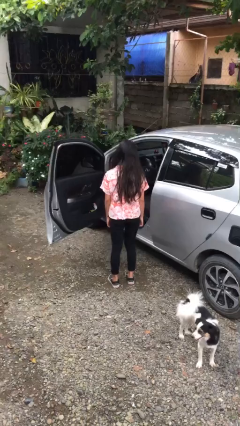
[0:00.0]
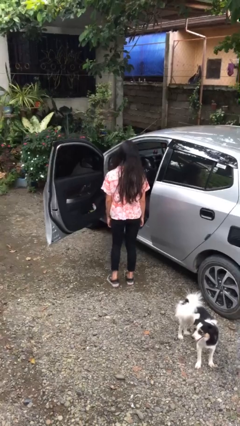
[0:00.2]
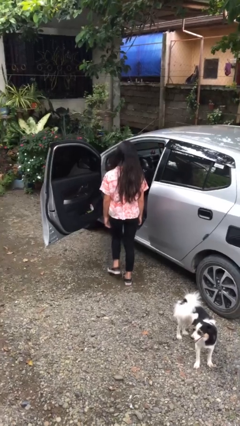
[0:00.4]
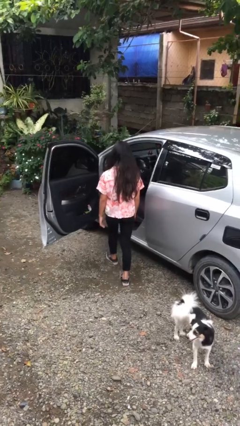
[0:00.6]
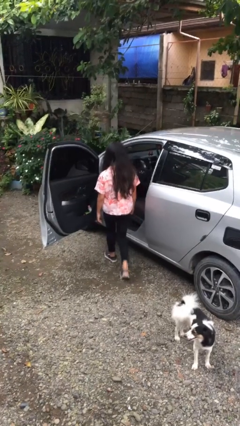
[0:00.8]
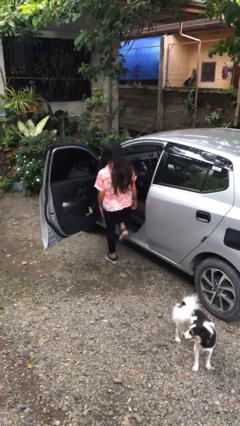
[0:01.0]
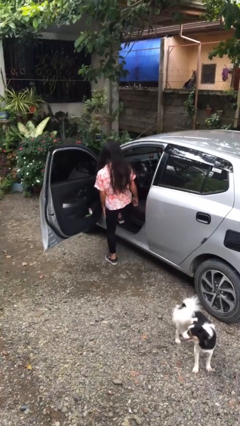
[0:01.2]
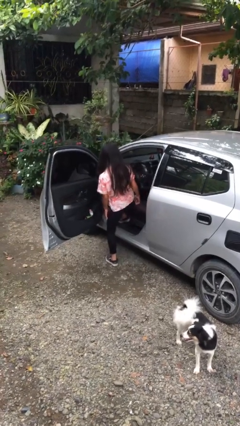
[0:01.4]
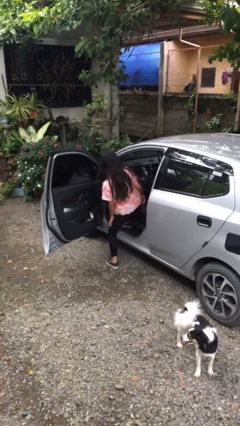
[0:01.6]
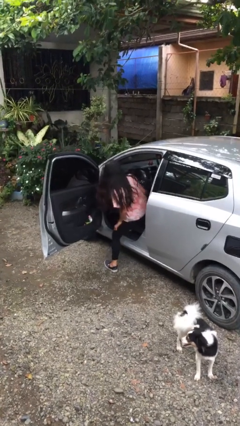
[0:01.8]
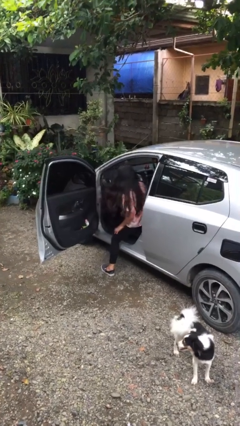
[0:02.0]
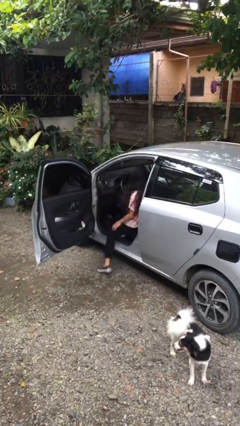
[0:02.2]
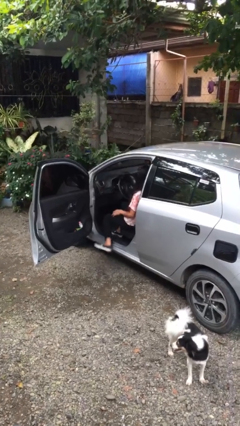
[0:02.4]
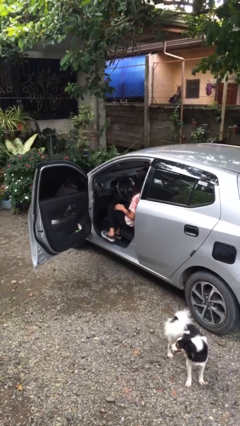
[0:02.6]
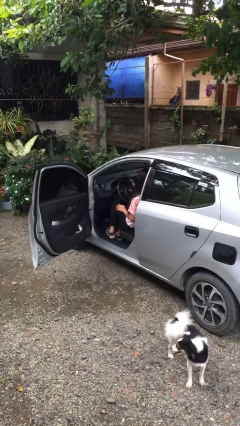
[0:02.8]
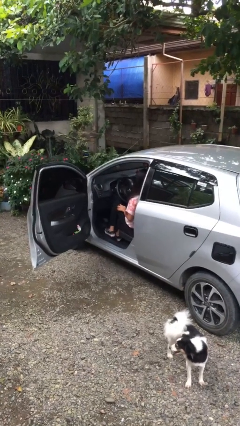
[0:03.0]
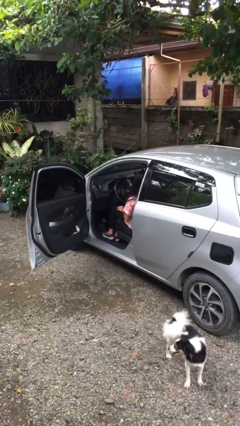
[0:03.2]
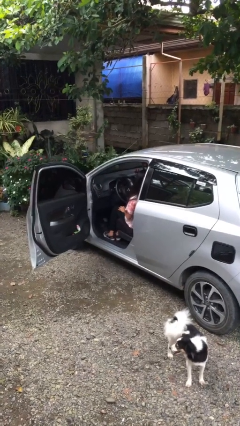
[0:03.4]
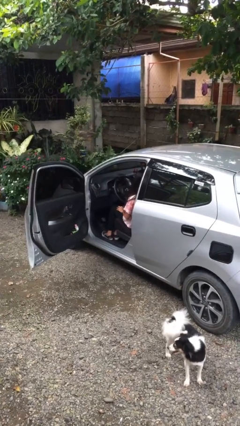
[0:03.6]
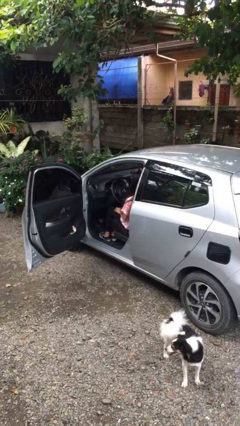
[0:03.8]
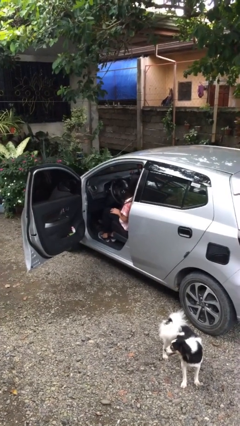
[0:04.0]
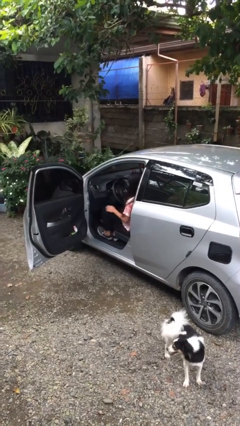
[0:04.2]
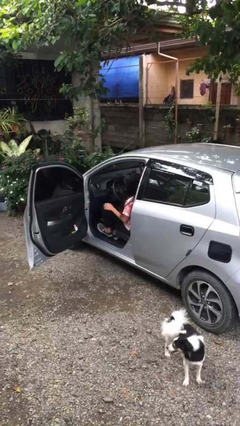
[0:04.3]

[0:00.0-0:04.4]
person enters car

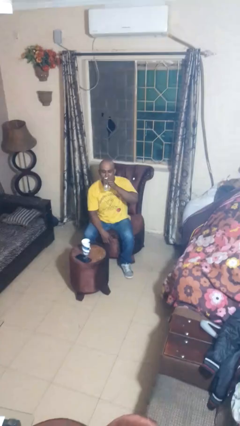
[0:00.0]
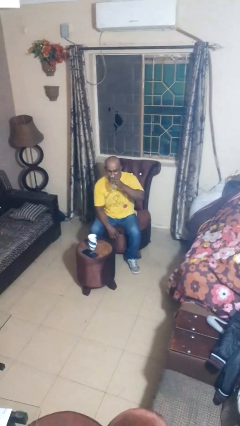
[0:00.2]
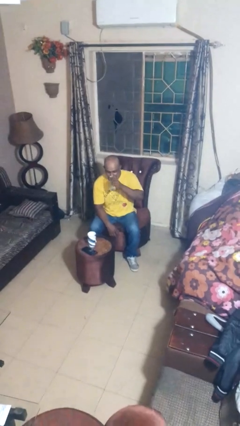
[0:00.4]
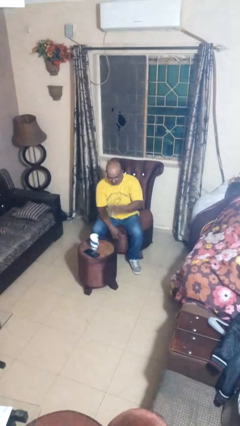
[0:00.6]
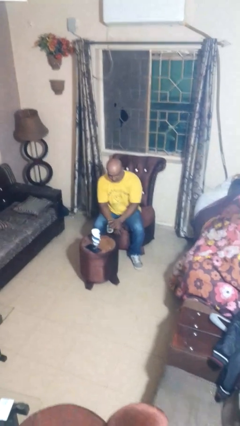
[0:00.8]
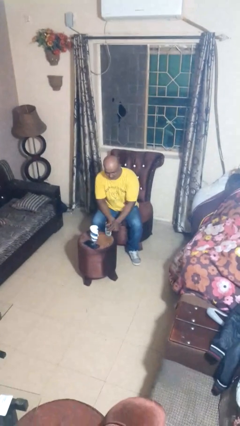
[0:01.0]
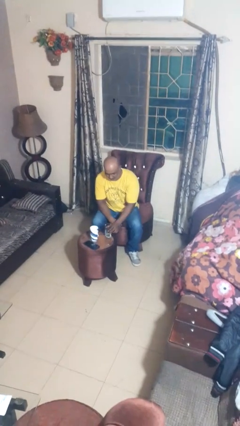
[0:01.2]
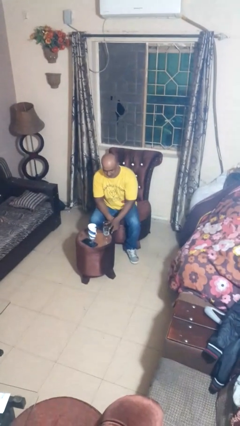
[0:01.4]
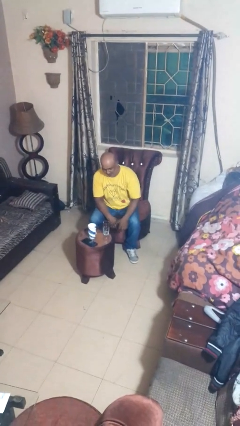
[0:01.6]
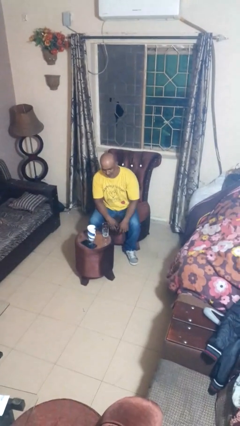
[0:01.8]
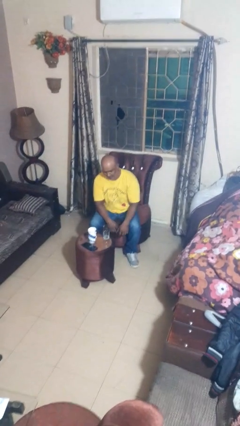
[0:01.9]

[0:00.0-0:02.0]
person puts down object on table

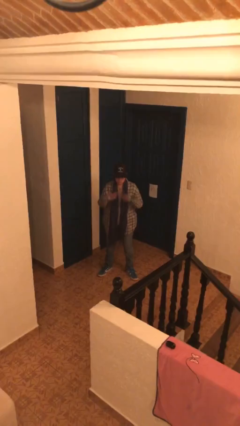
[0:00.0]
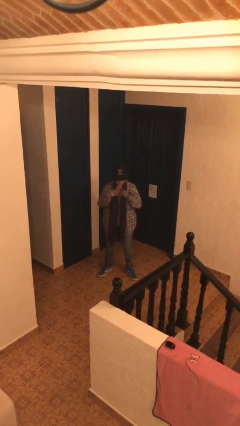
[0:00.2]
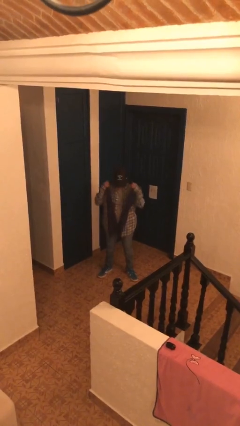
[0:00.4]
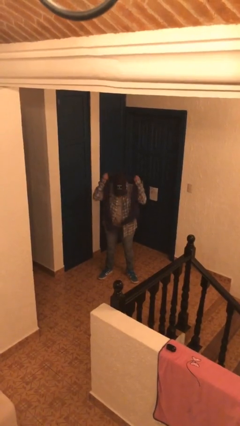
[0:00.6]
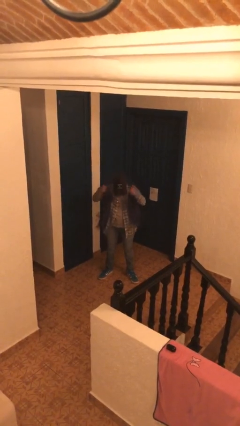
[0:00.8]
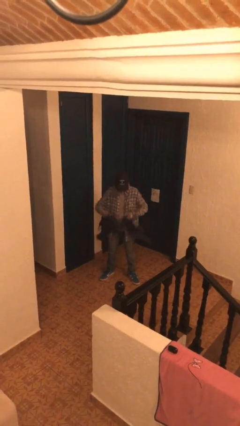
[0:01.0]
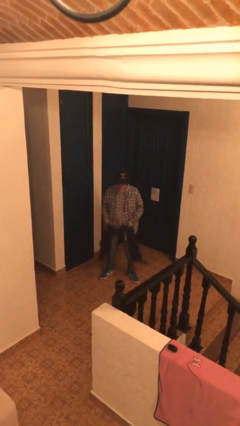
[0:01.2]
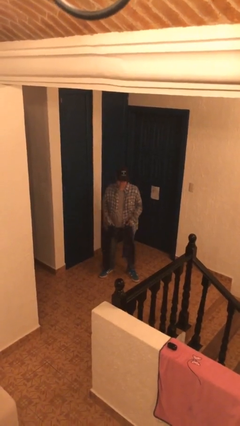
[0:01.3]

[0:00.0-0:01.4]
person takes off scarf

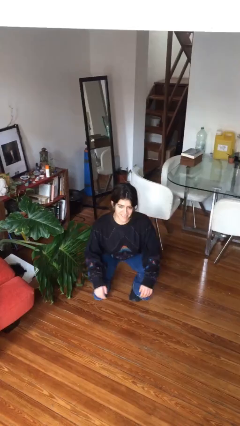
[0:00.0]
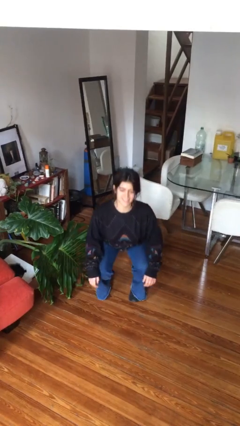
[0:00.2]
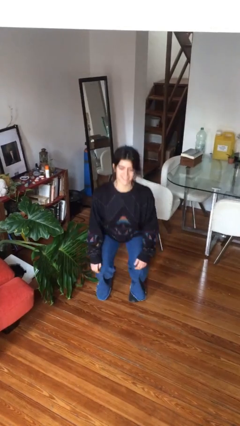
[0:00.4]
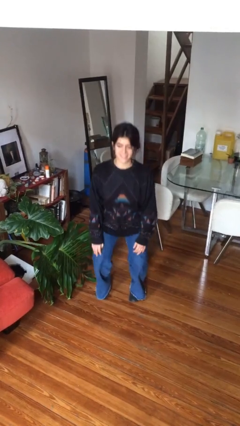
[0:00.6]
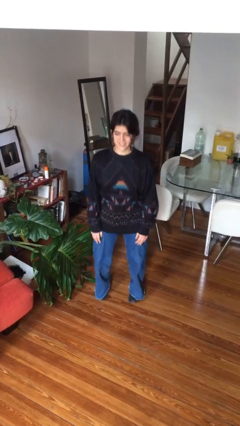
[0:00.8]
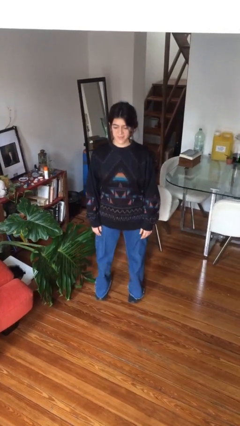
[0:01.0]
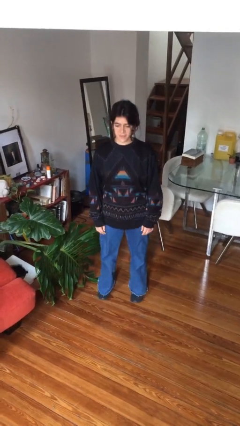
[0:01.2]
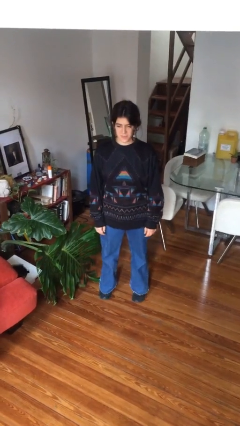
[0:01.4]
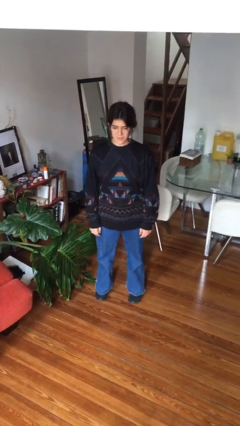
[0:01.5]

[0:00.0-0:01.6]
person stands up

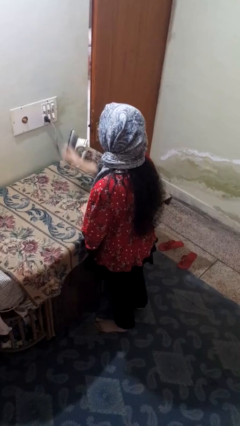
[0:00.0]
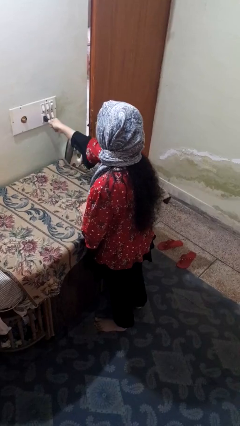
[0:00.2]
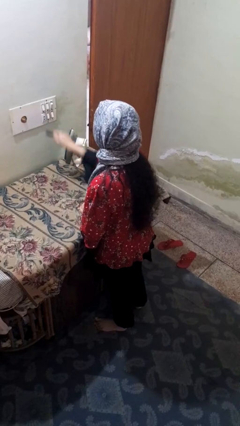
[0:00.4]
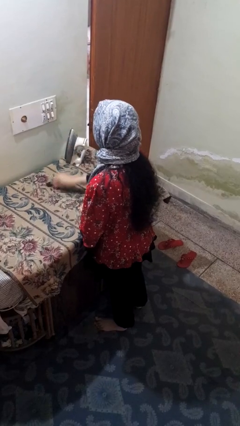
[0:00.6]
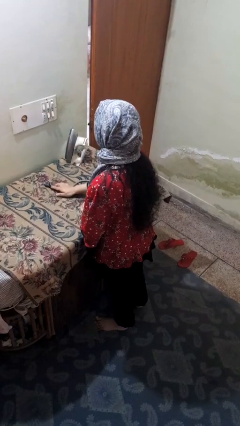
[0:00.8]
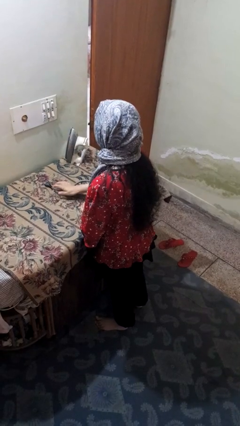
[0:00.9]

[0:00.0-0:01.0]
person unplugs from electrical socket

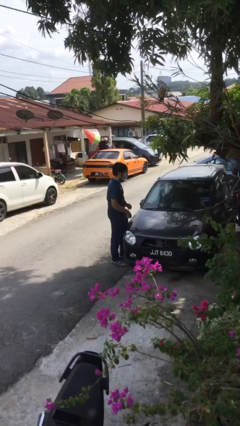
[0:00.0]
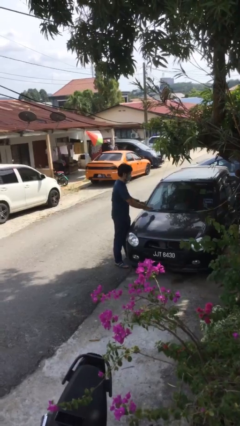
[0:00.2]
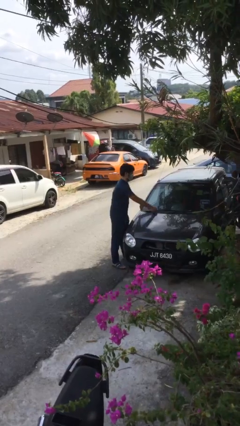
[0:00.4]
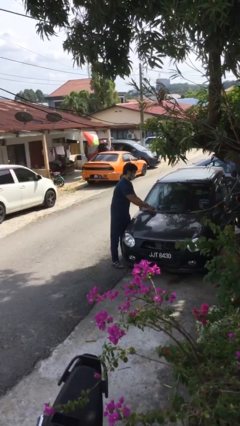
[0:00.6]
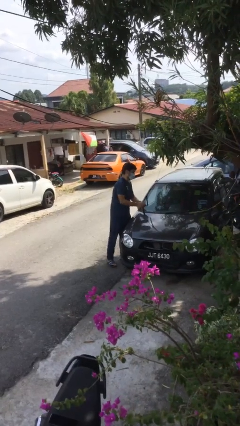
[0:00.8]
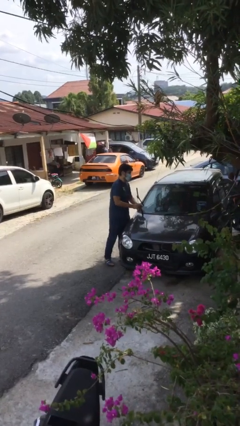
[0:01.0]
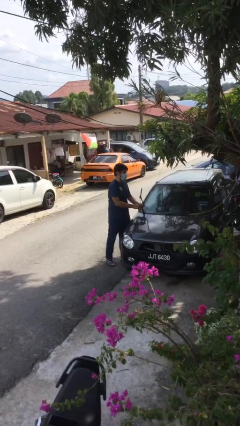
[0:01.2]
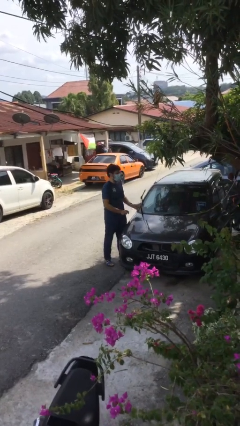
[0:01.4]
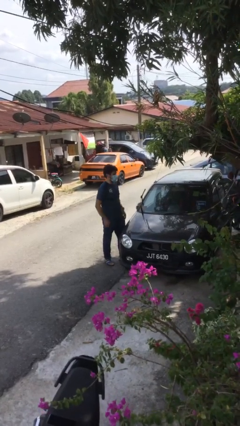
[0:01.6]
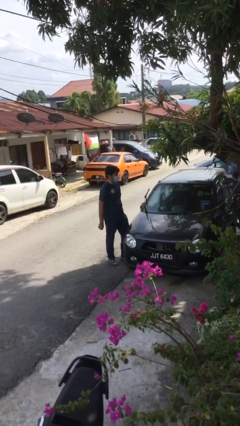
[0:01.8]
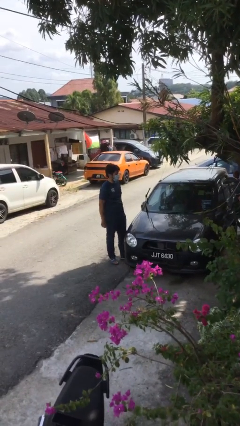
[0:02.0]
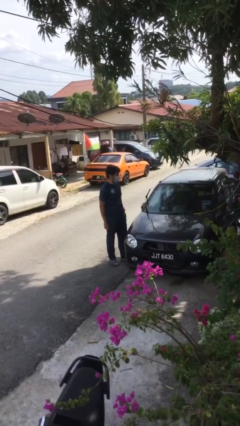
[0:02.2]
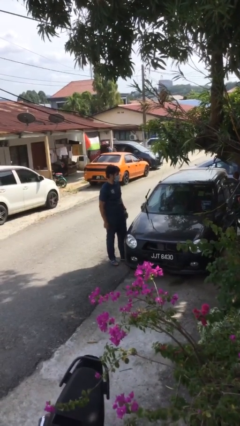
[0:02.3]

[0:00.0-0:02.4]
person flips up car wipers

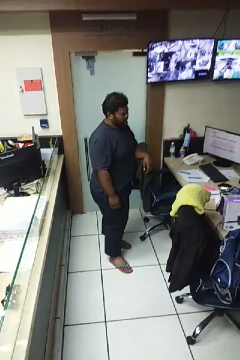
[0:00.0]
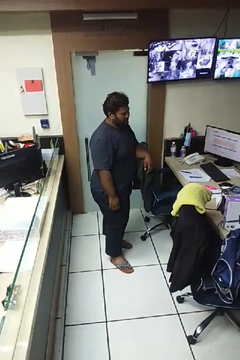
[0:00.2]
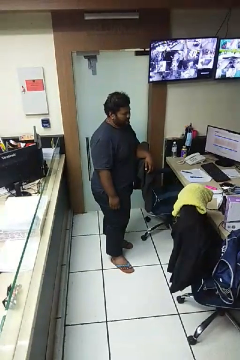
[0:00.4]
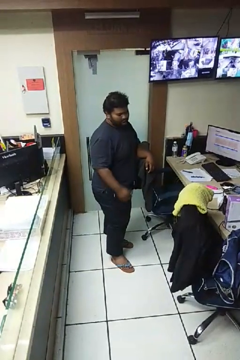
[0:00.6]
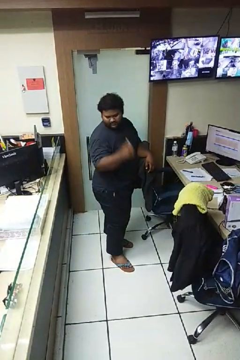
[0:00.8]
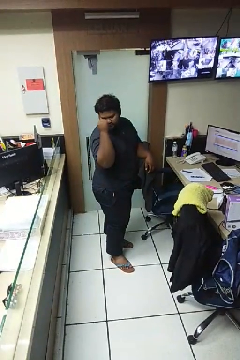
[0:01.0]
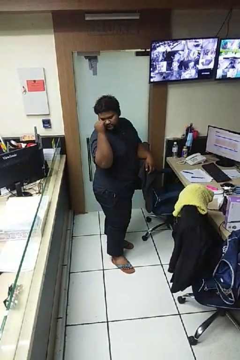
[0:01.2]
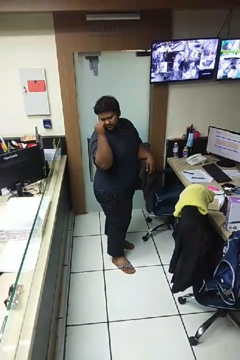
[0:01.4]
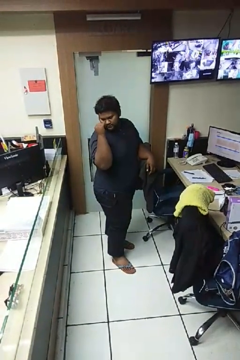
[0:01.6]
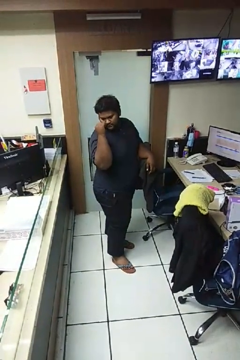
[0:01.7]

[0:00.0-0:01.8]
person gestures behind me

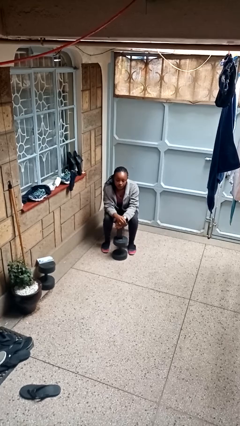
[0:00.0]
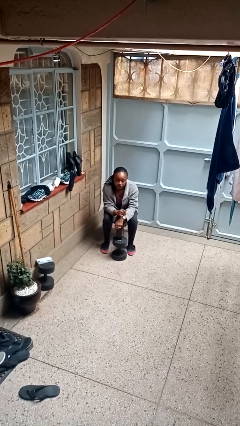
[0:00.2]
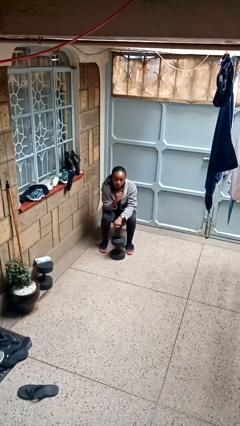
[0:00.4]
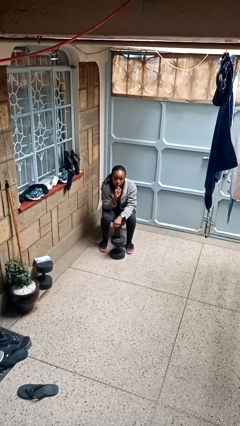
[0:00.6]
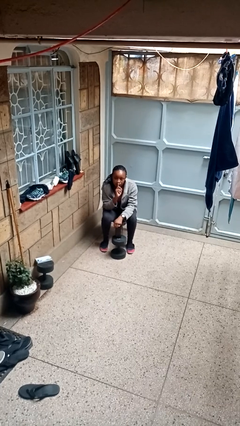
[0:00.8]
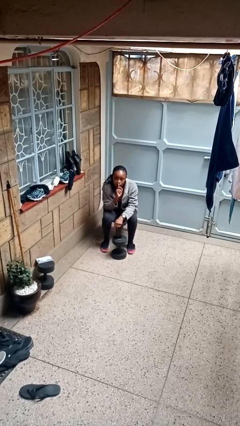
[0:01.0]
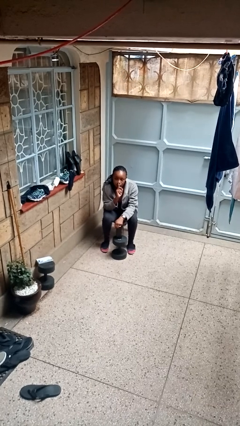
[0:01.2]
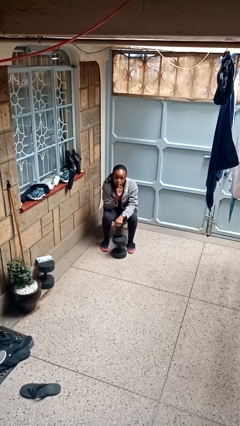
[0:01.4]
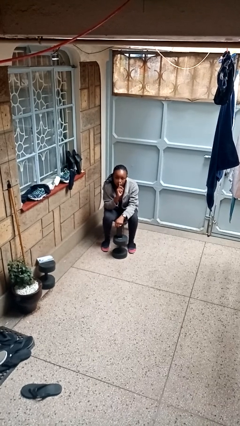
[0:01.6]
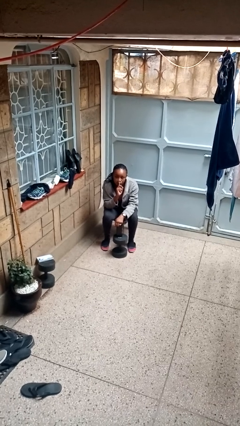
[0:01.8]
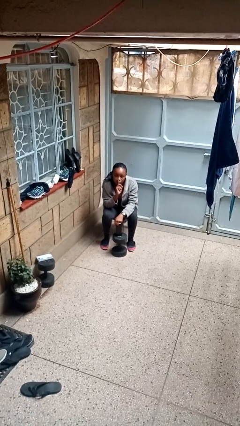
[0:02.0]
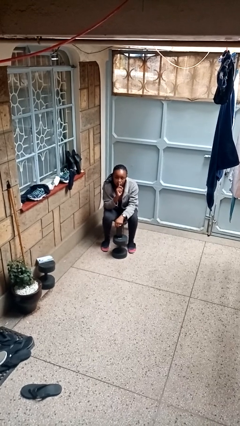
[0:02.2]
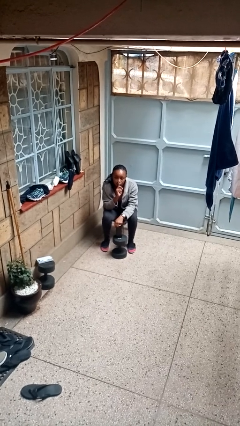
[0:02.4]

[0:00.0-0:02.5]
person gestures be quiet
